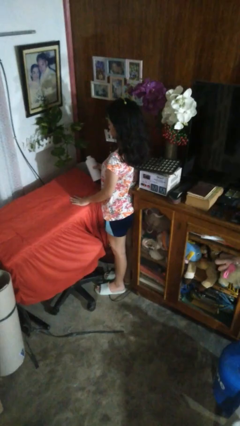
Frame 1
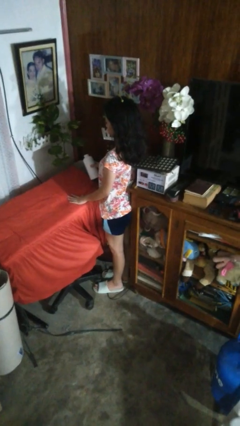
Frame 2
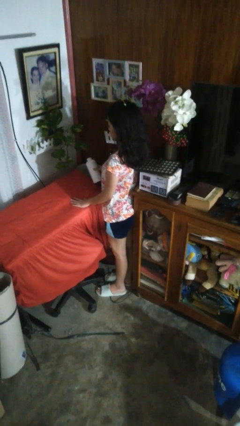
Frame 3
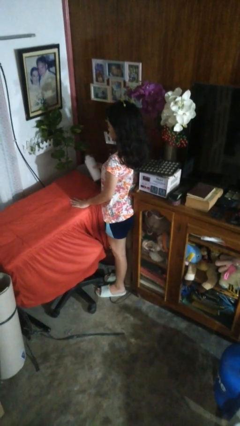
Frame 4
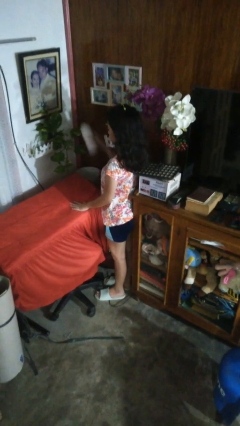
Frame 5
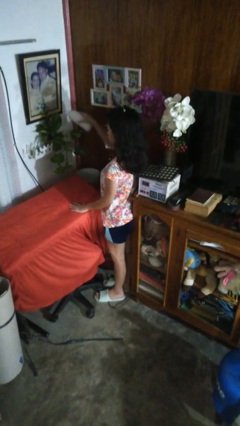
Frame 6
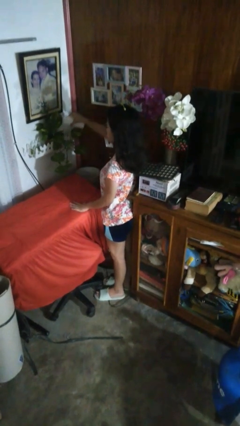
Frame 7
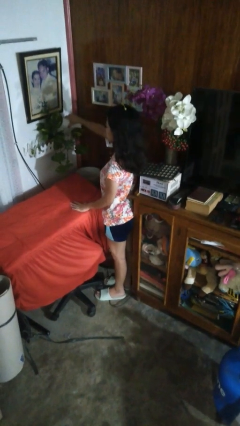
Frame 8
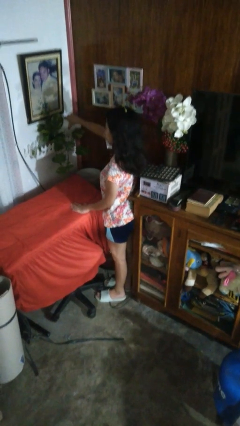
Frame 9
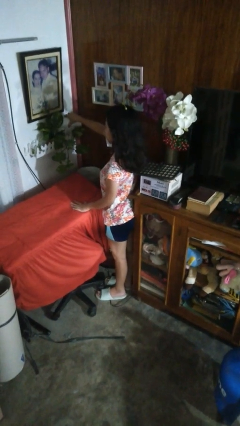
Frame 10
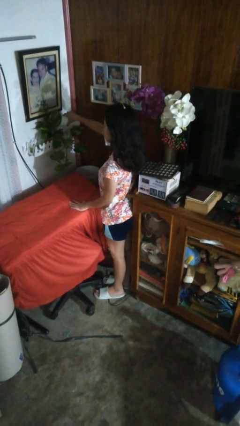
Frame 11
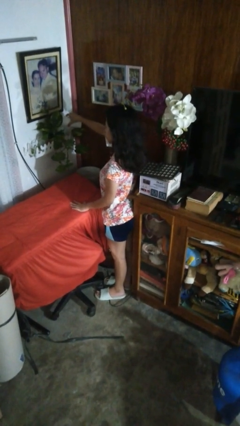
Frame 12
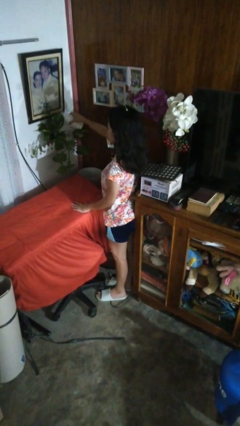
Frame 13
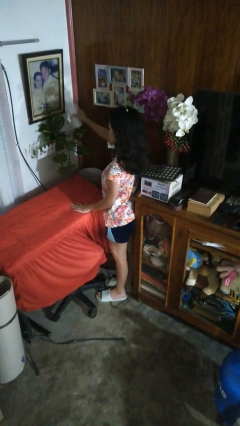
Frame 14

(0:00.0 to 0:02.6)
person waters houseplant

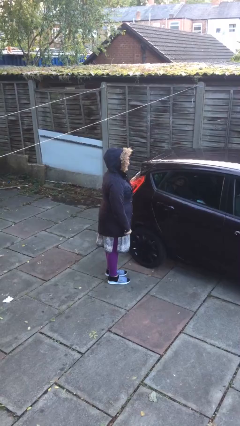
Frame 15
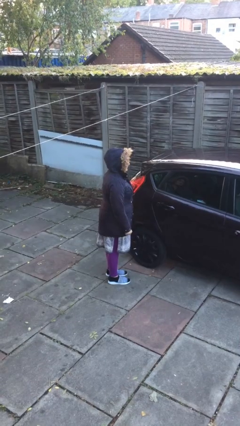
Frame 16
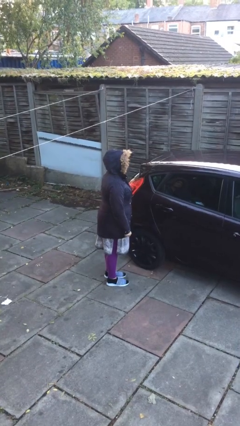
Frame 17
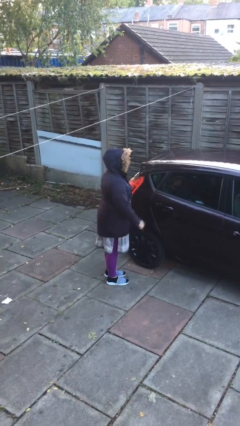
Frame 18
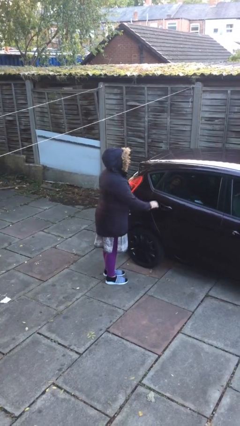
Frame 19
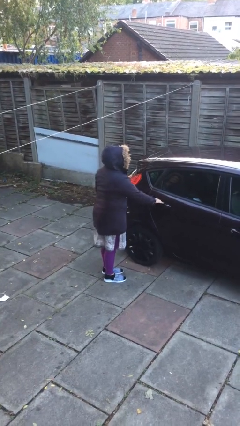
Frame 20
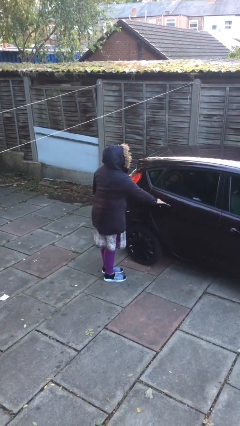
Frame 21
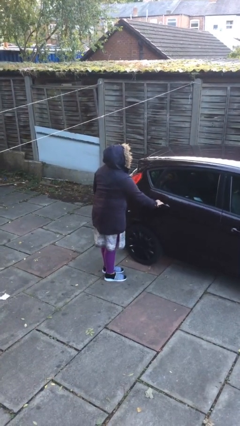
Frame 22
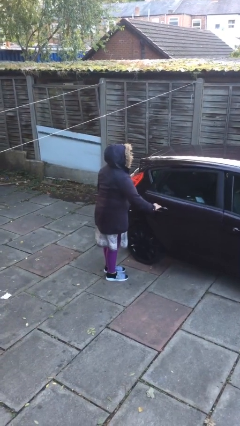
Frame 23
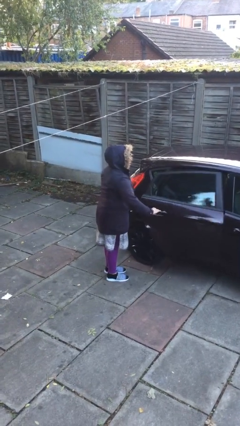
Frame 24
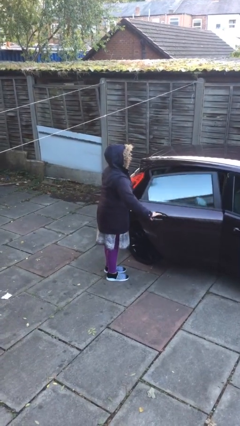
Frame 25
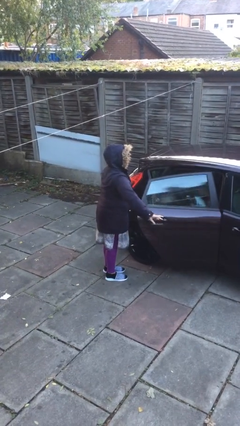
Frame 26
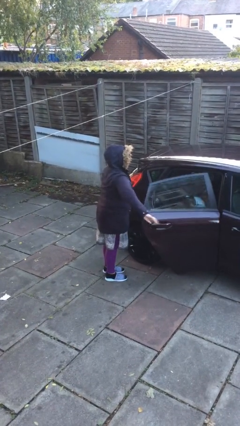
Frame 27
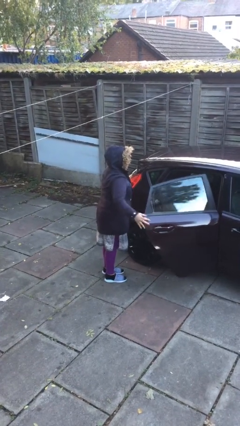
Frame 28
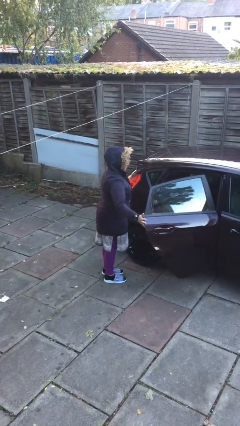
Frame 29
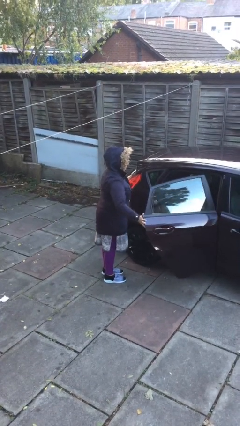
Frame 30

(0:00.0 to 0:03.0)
person opens car door

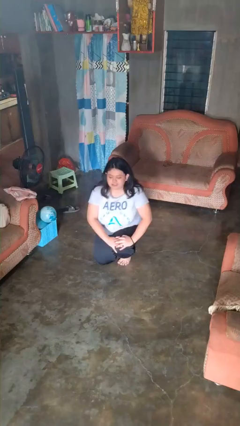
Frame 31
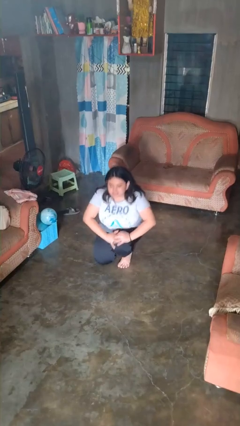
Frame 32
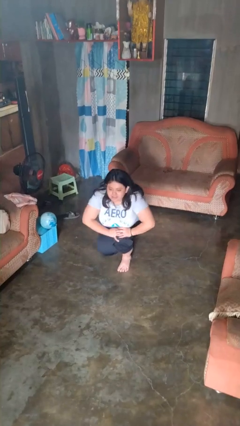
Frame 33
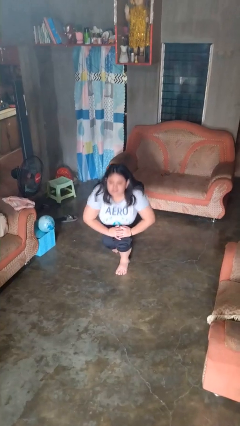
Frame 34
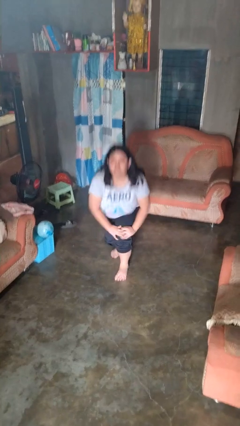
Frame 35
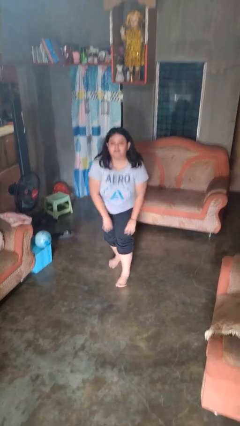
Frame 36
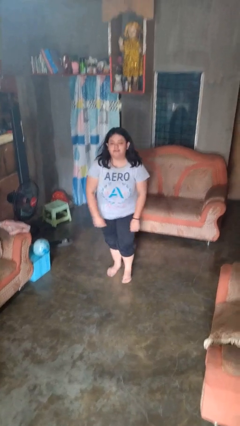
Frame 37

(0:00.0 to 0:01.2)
person stands up from floor

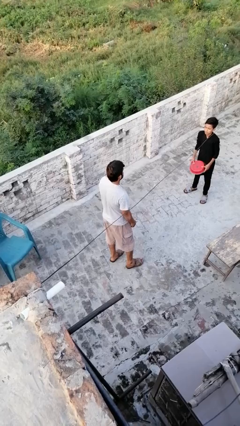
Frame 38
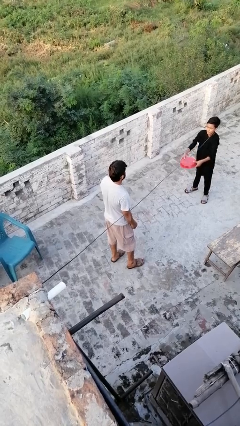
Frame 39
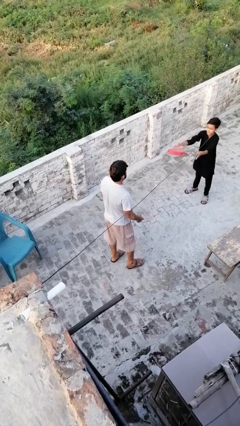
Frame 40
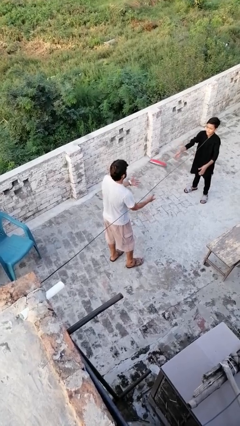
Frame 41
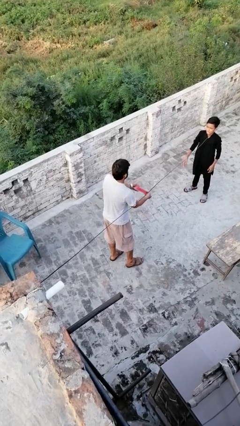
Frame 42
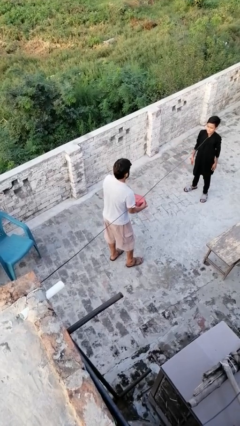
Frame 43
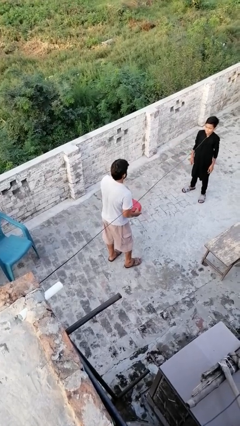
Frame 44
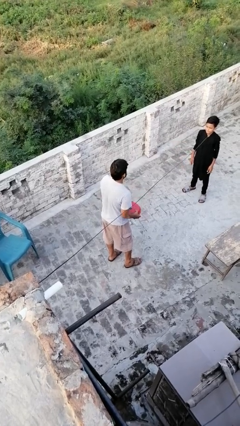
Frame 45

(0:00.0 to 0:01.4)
person catches object from person

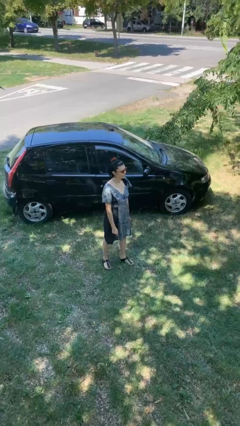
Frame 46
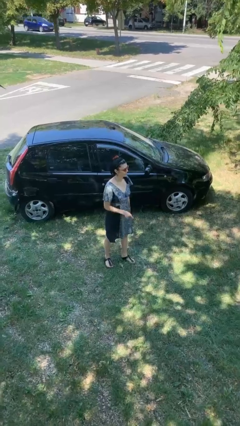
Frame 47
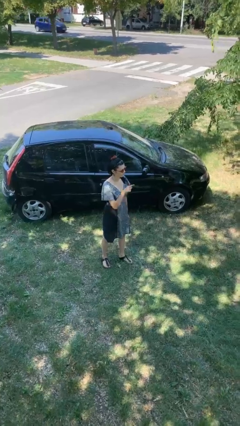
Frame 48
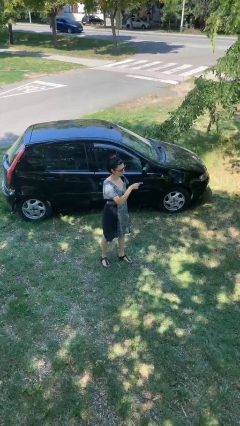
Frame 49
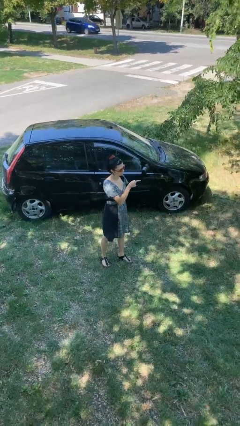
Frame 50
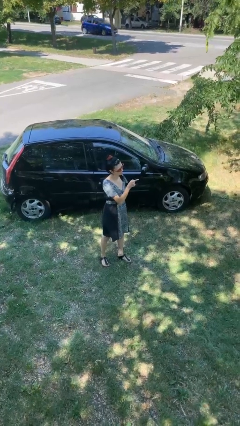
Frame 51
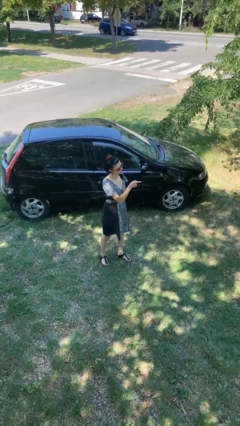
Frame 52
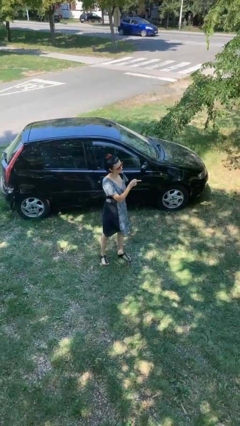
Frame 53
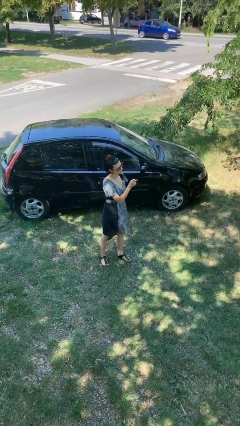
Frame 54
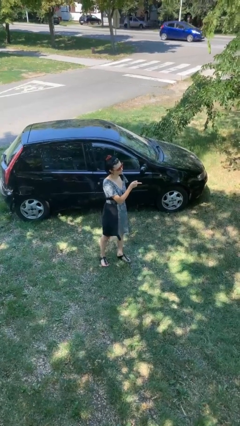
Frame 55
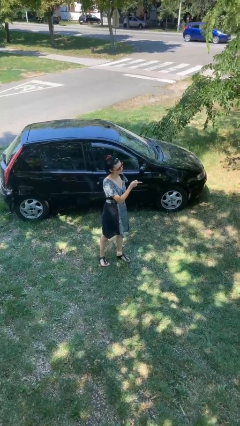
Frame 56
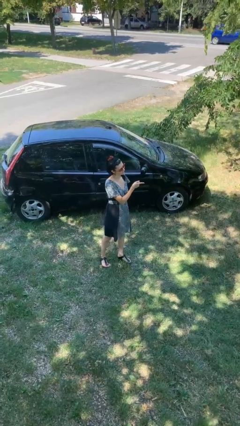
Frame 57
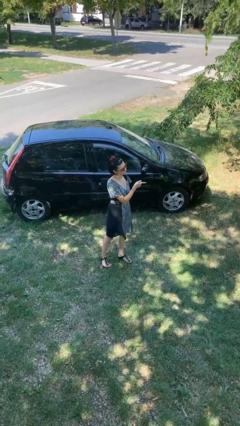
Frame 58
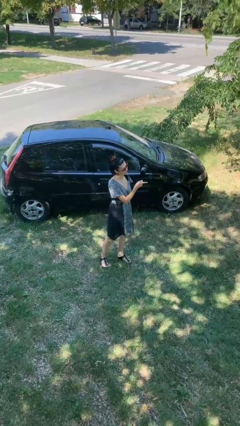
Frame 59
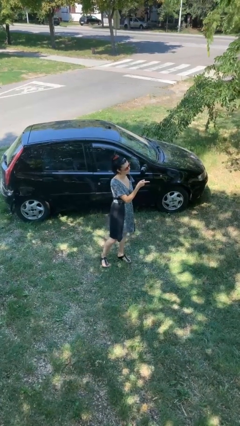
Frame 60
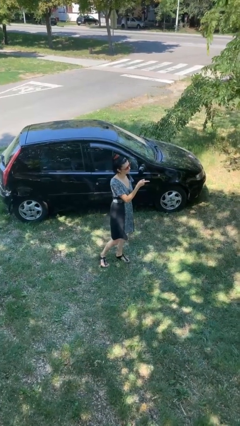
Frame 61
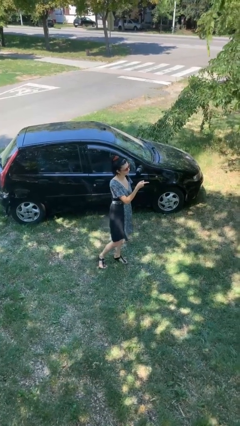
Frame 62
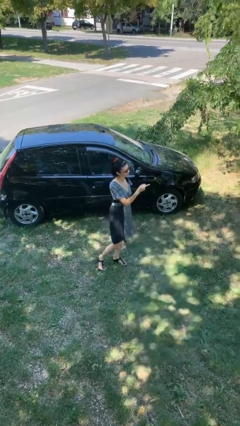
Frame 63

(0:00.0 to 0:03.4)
person points at person

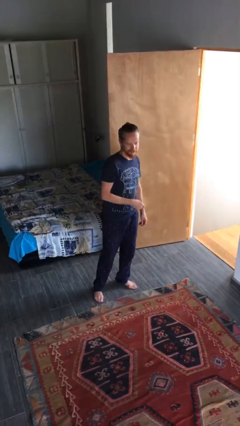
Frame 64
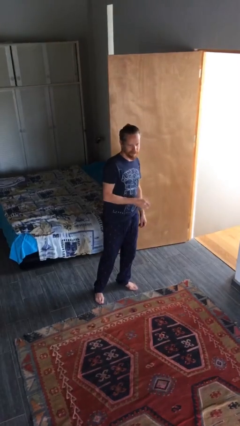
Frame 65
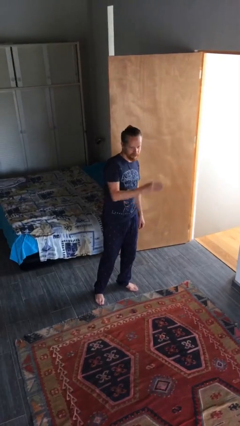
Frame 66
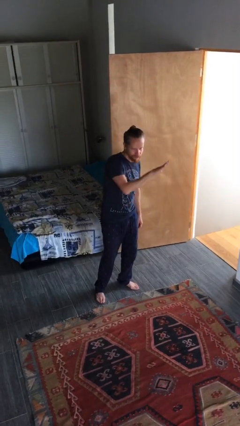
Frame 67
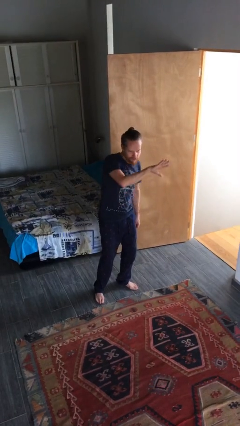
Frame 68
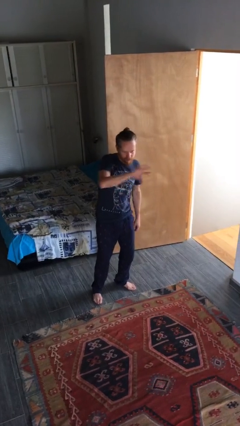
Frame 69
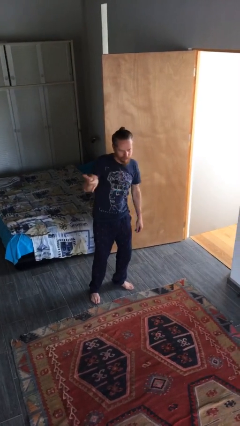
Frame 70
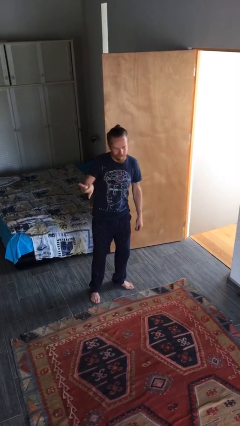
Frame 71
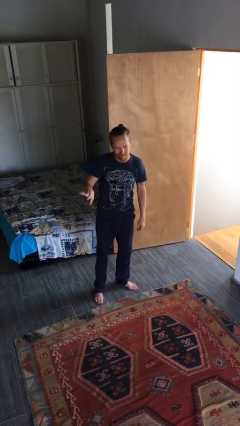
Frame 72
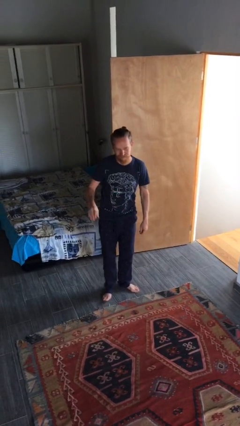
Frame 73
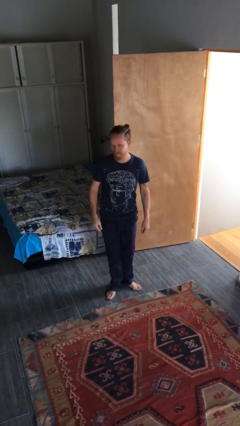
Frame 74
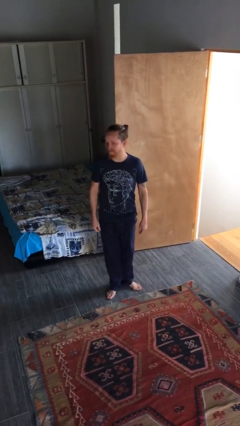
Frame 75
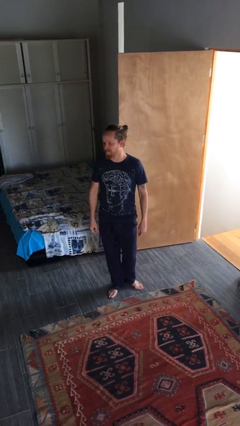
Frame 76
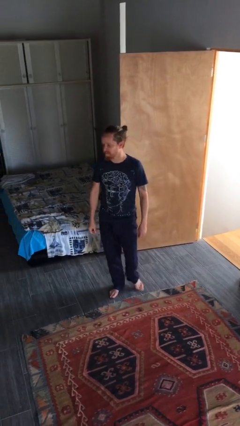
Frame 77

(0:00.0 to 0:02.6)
person gestures swipe right

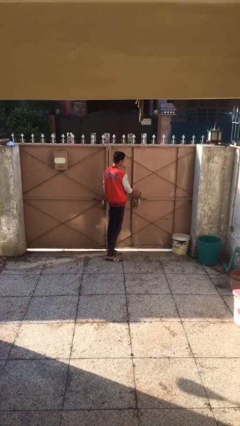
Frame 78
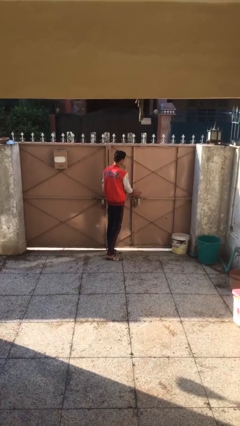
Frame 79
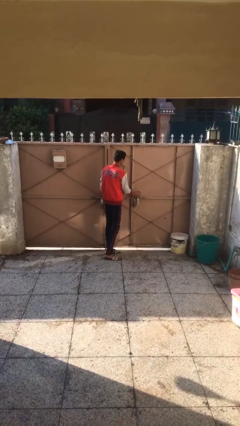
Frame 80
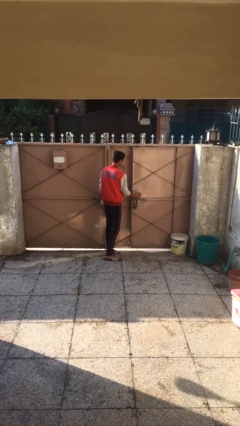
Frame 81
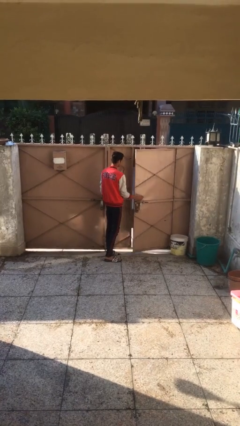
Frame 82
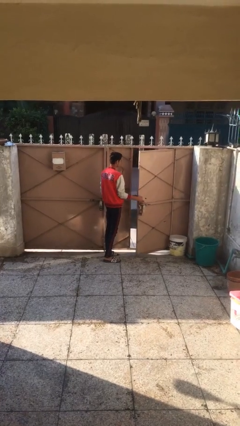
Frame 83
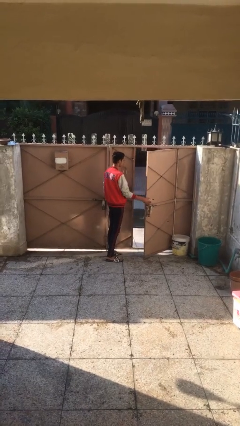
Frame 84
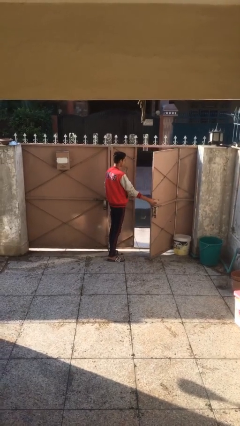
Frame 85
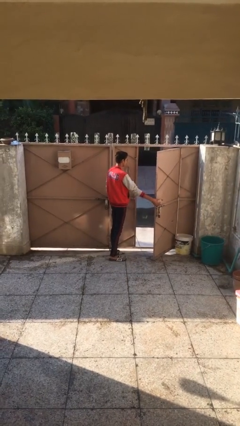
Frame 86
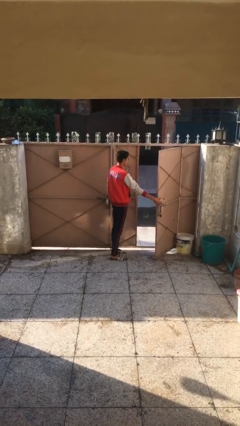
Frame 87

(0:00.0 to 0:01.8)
person opens facility door

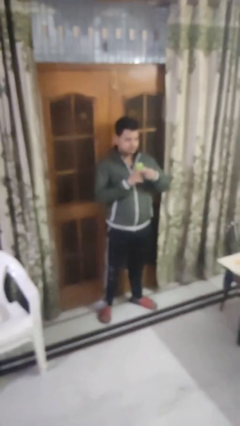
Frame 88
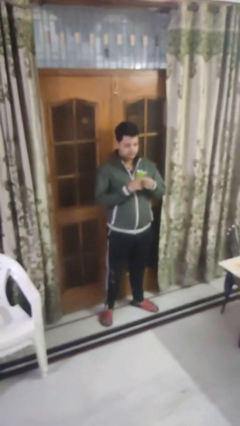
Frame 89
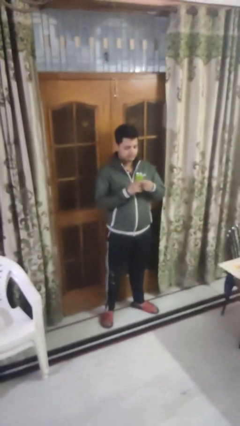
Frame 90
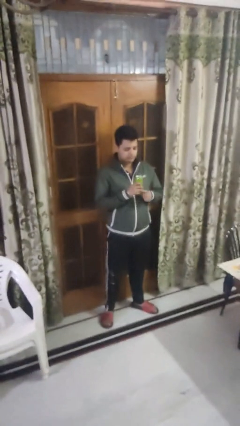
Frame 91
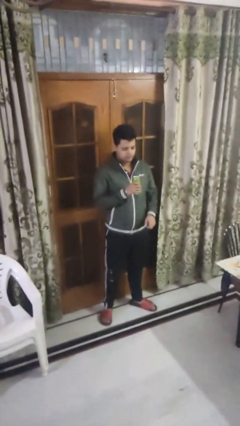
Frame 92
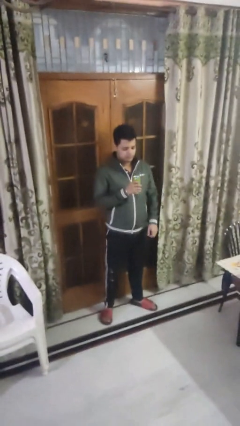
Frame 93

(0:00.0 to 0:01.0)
person opens beverage can

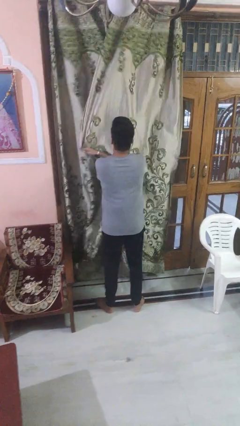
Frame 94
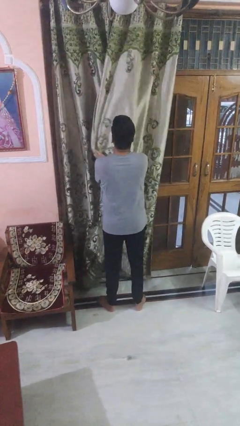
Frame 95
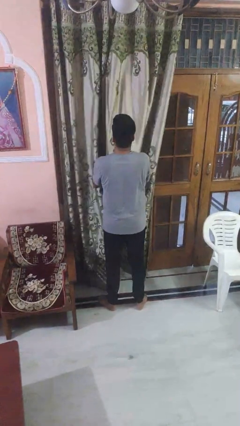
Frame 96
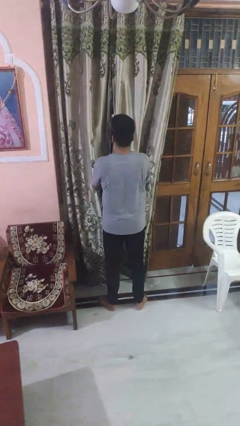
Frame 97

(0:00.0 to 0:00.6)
person closes curtains
